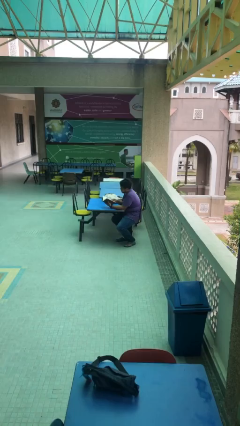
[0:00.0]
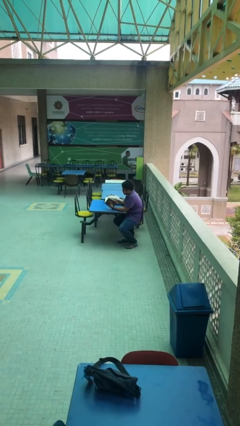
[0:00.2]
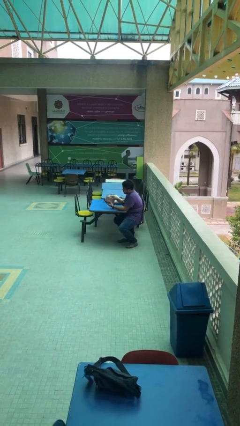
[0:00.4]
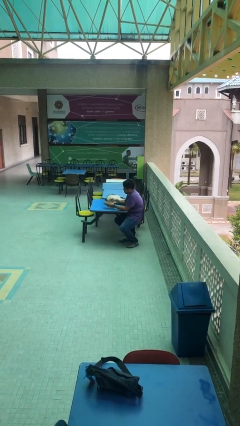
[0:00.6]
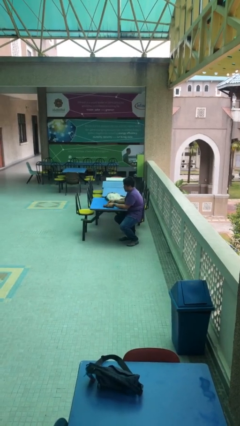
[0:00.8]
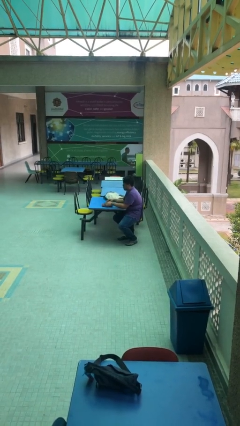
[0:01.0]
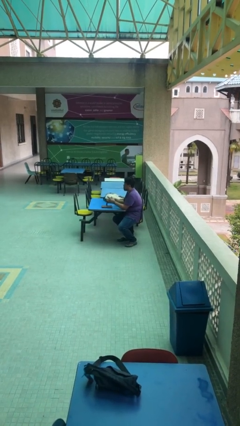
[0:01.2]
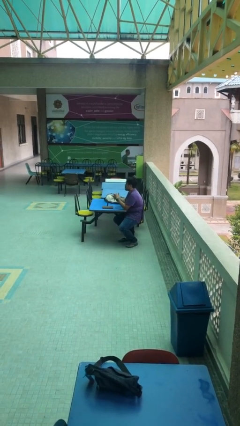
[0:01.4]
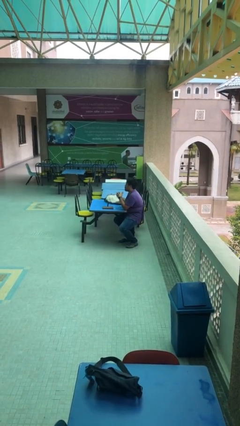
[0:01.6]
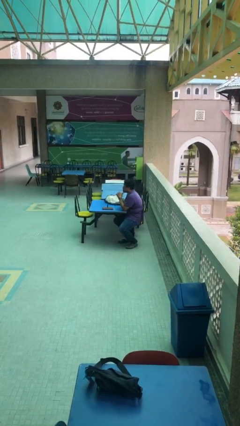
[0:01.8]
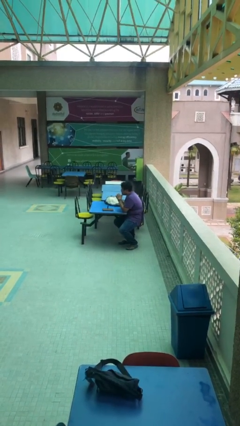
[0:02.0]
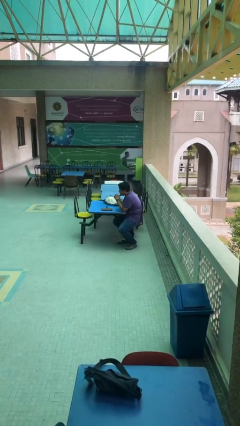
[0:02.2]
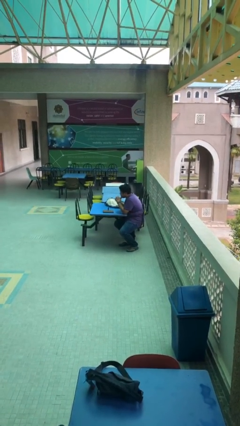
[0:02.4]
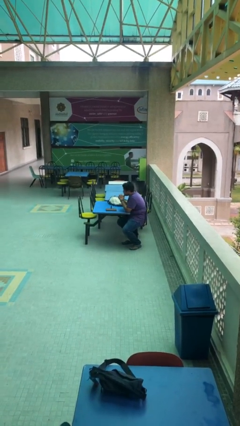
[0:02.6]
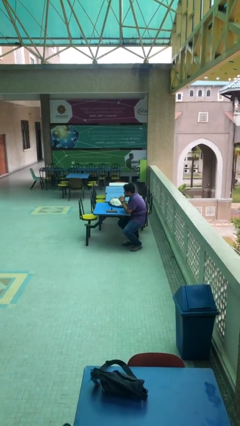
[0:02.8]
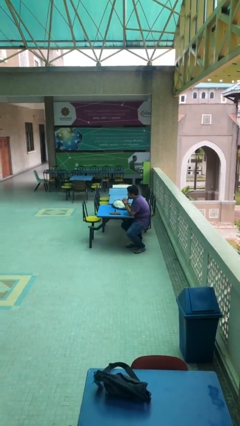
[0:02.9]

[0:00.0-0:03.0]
person puts down object on table

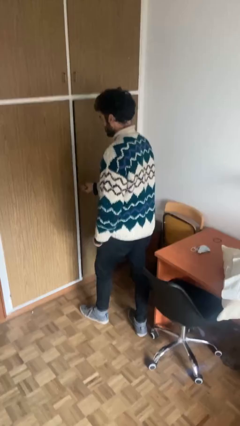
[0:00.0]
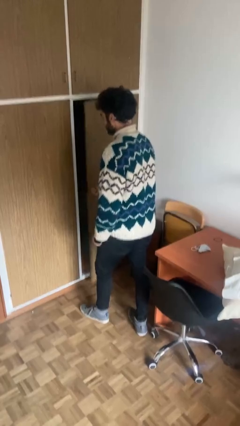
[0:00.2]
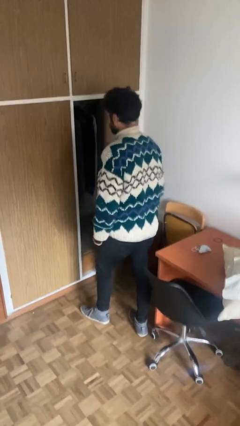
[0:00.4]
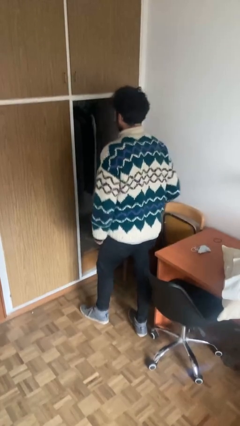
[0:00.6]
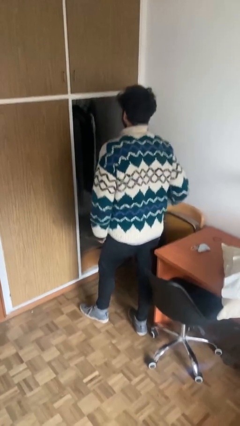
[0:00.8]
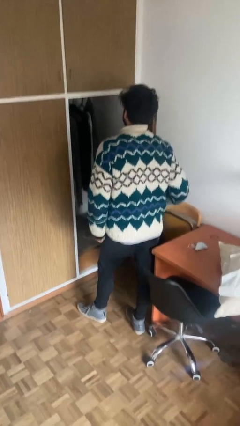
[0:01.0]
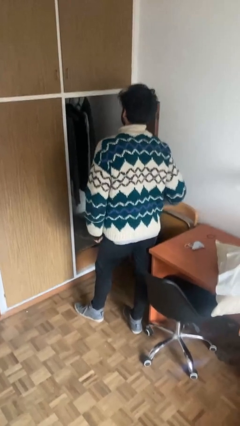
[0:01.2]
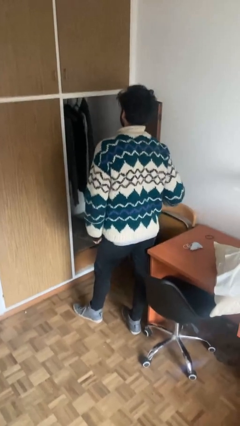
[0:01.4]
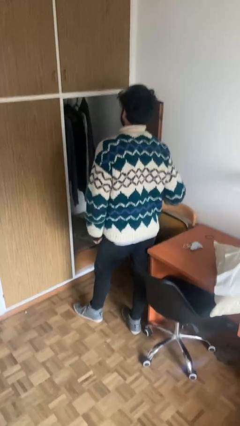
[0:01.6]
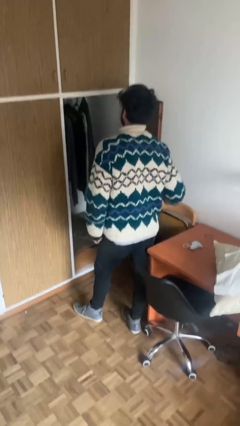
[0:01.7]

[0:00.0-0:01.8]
person opens closet door

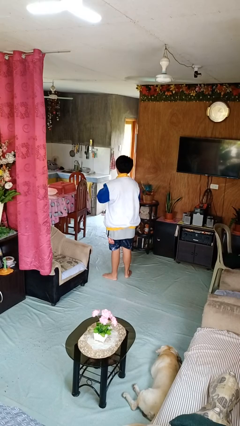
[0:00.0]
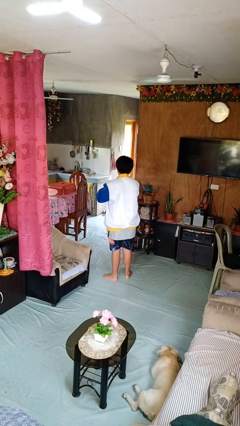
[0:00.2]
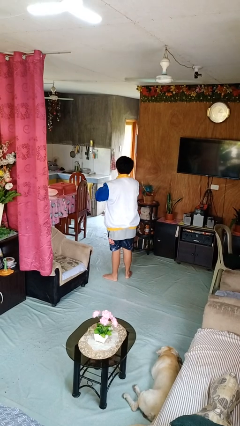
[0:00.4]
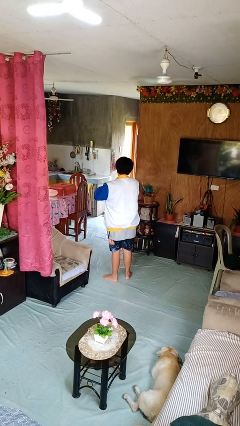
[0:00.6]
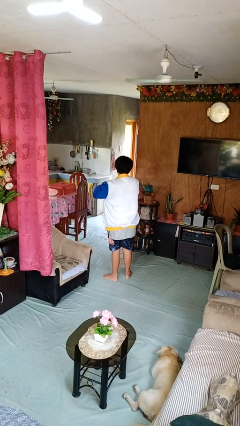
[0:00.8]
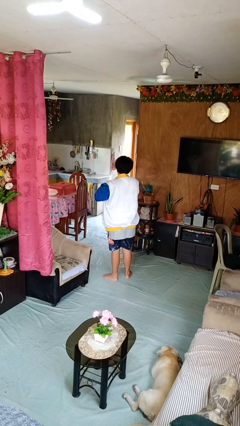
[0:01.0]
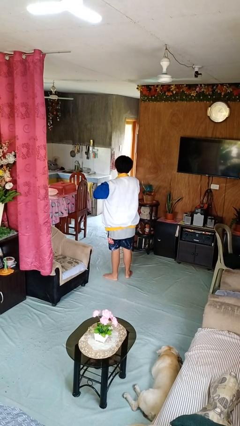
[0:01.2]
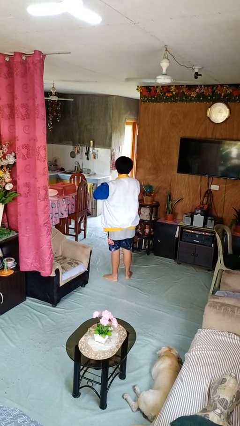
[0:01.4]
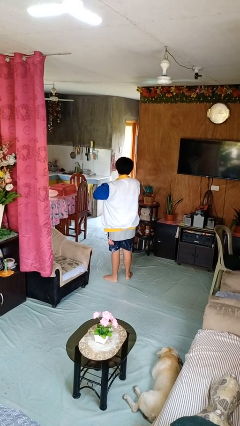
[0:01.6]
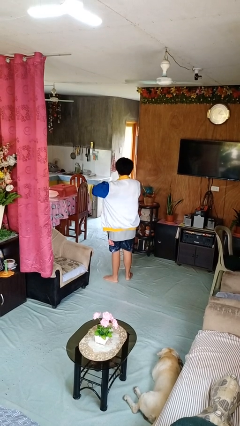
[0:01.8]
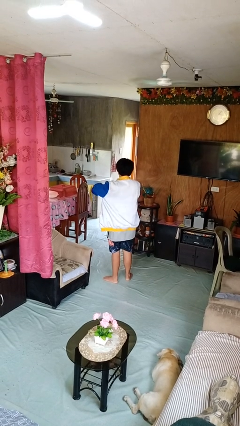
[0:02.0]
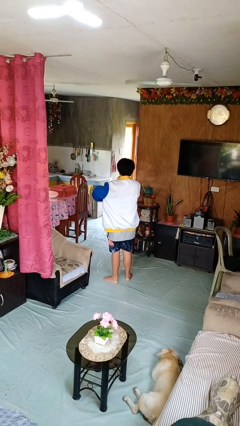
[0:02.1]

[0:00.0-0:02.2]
person unzips jacket

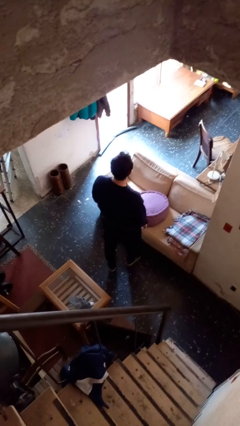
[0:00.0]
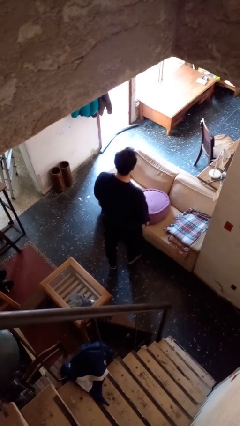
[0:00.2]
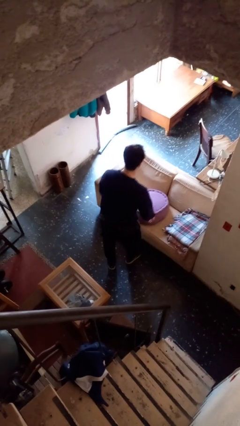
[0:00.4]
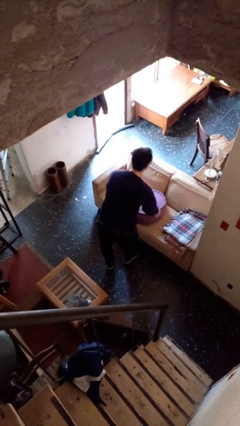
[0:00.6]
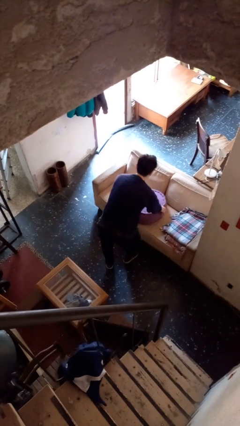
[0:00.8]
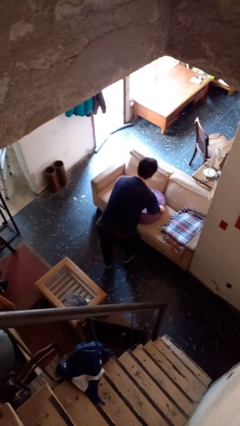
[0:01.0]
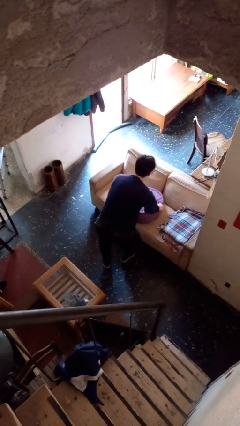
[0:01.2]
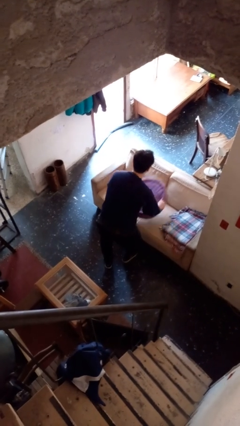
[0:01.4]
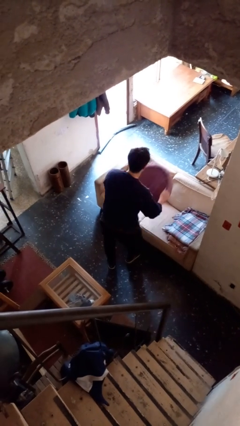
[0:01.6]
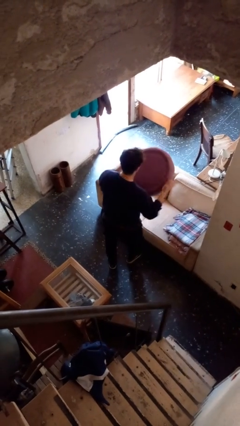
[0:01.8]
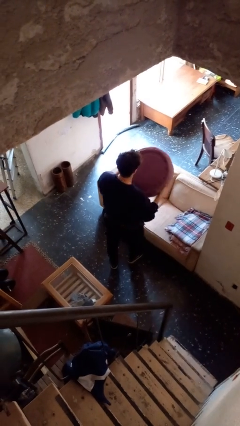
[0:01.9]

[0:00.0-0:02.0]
person picks up object from couch

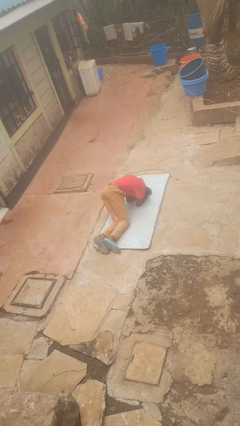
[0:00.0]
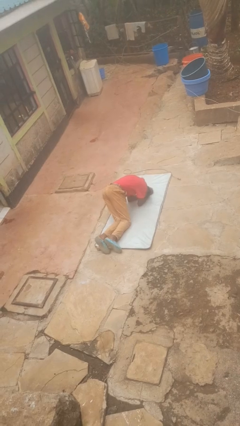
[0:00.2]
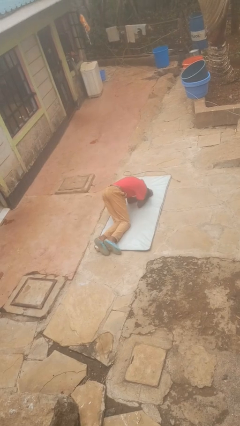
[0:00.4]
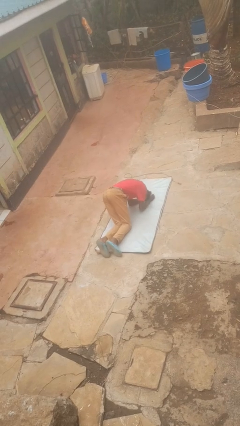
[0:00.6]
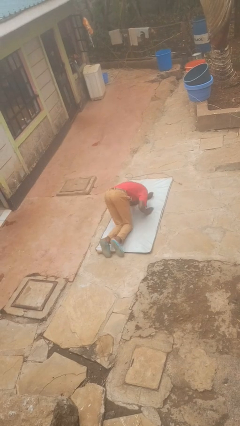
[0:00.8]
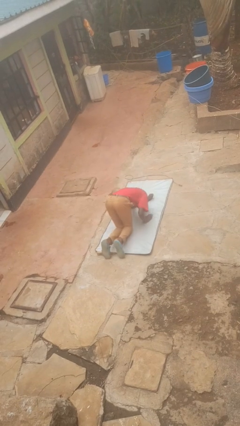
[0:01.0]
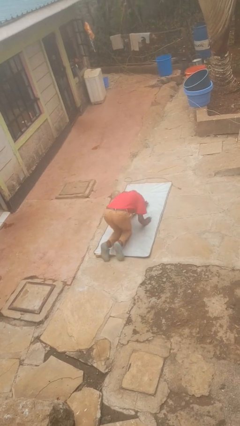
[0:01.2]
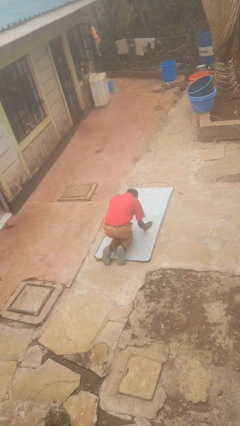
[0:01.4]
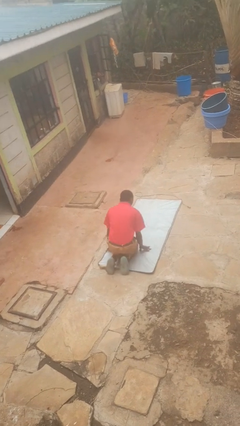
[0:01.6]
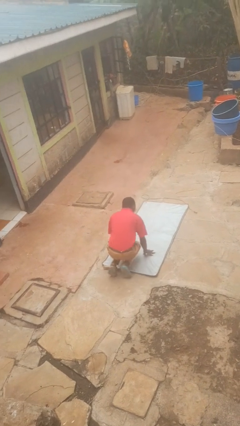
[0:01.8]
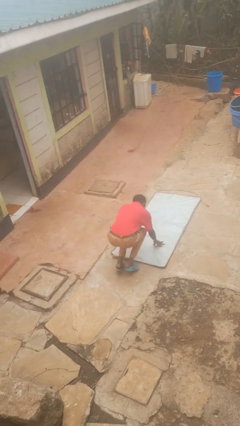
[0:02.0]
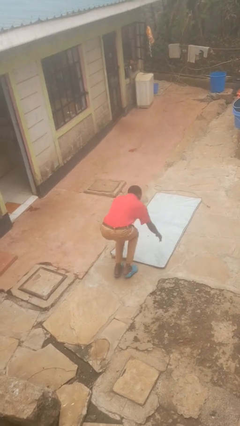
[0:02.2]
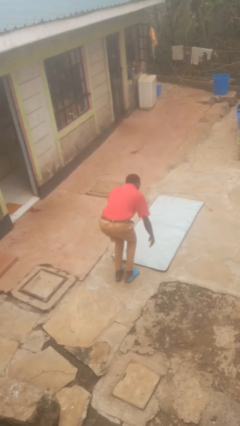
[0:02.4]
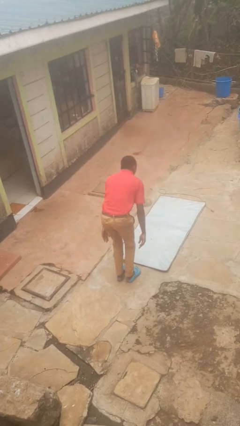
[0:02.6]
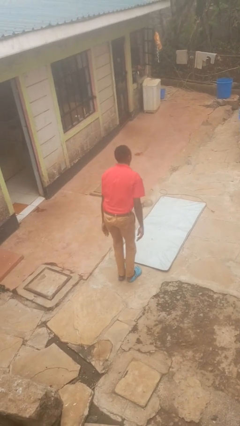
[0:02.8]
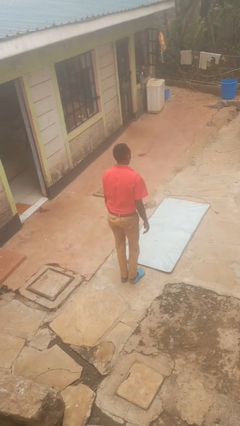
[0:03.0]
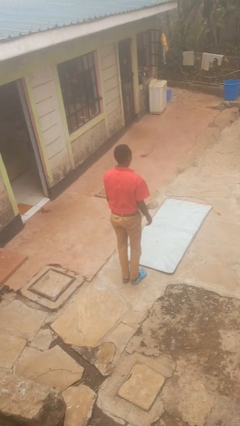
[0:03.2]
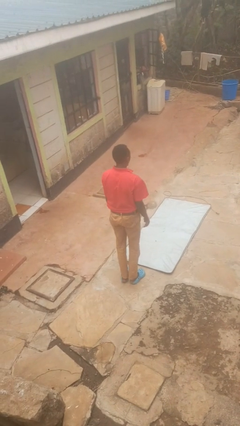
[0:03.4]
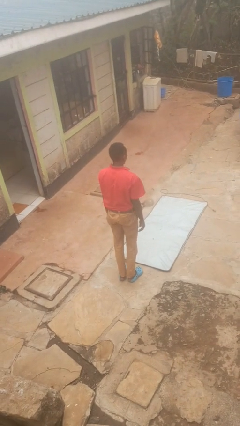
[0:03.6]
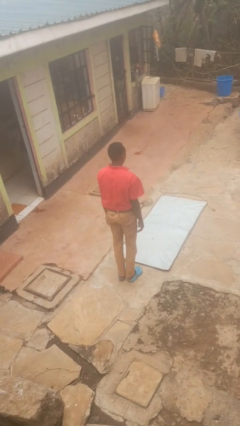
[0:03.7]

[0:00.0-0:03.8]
person stands up from floor

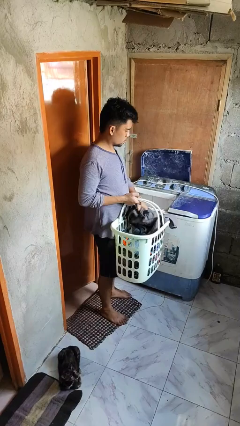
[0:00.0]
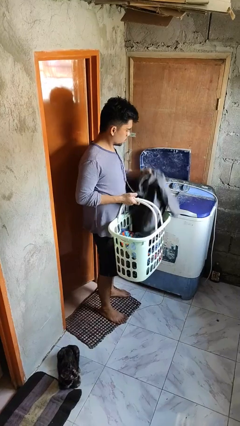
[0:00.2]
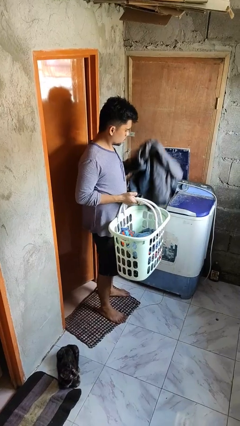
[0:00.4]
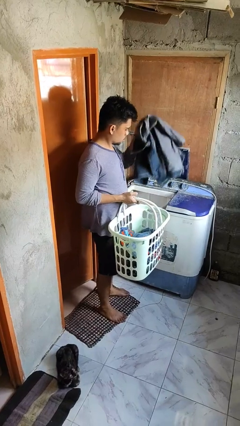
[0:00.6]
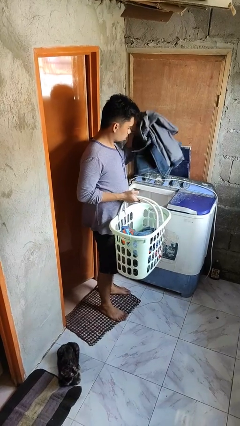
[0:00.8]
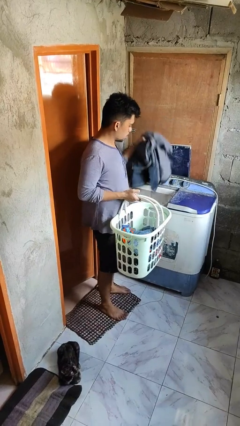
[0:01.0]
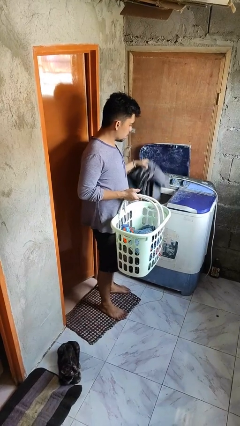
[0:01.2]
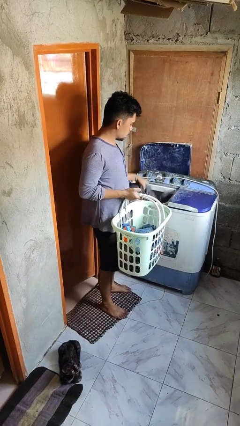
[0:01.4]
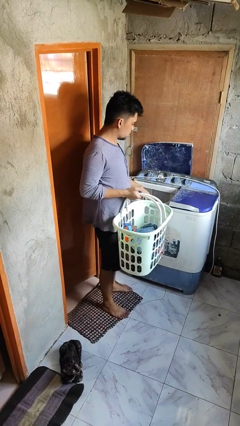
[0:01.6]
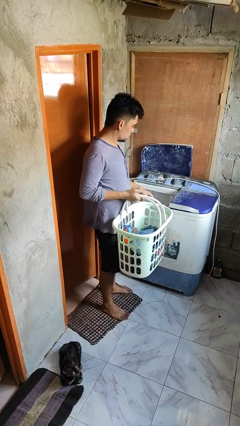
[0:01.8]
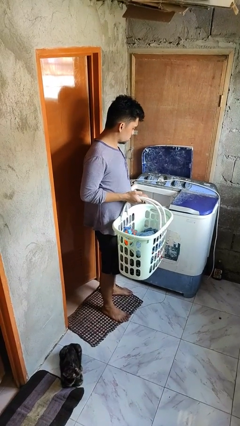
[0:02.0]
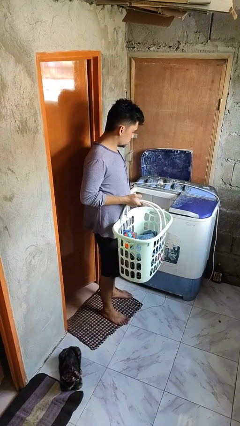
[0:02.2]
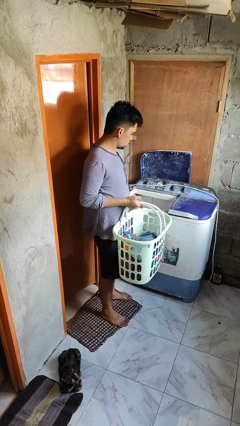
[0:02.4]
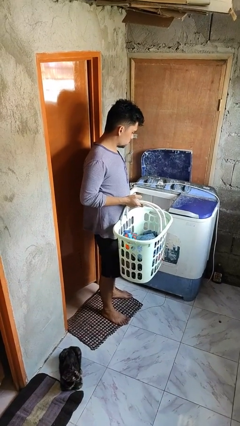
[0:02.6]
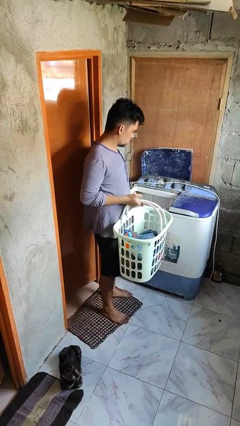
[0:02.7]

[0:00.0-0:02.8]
person loads clotheswasher

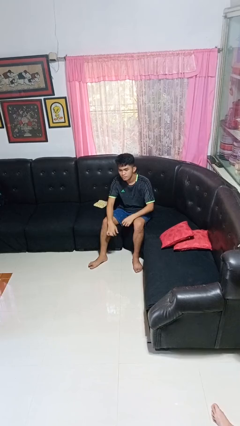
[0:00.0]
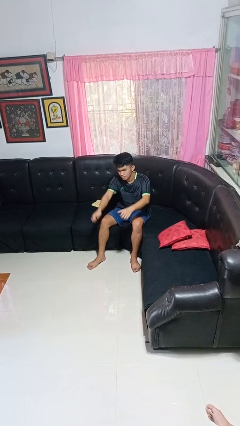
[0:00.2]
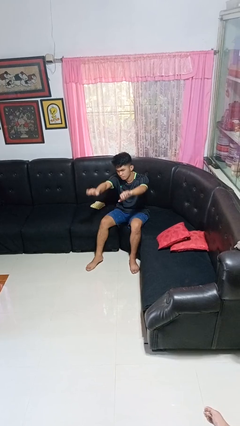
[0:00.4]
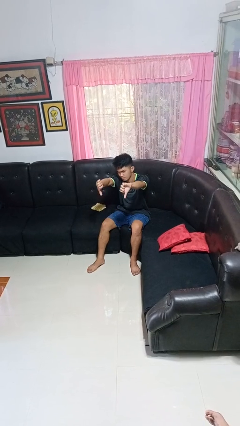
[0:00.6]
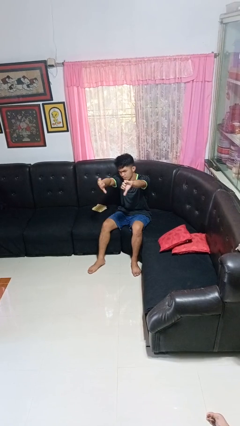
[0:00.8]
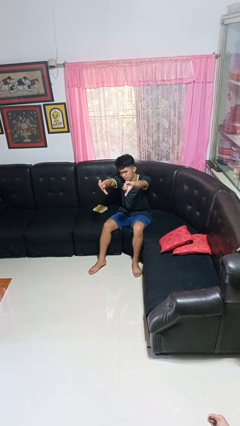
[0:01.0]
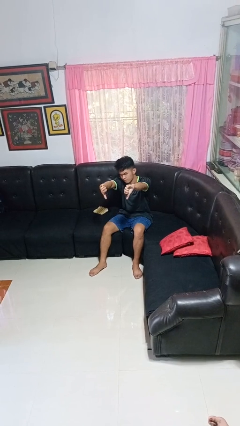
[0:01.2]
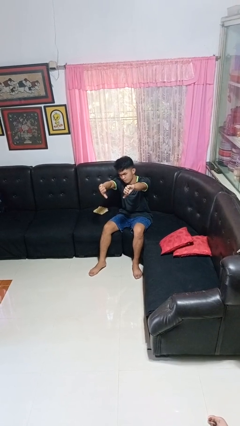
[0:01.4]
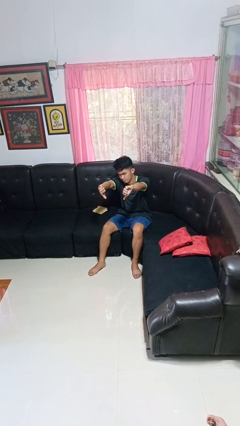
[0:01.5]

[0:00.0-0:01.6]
person gestures thumbs down

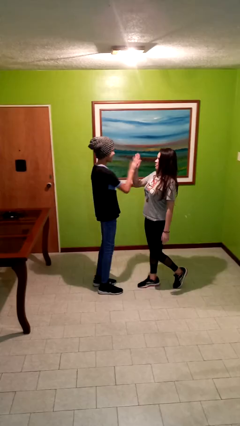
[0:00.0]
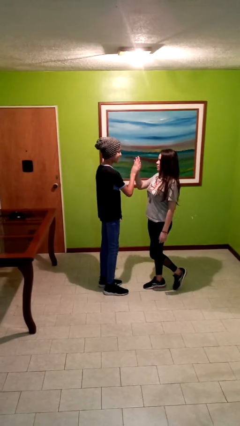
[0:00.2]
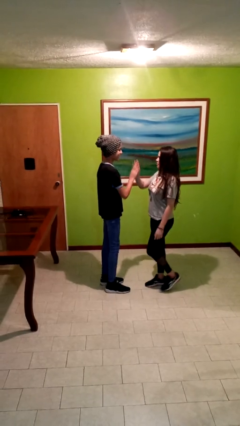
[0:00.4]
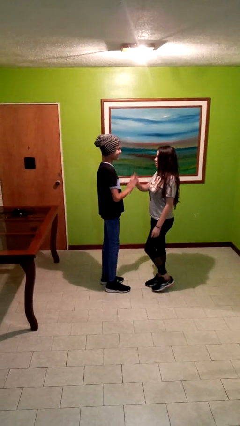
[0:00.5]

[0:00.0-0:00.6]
person highfives hand
